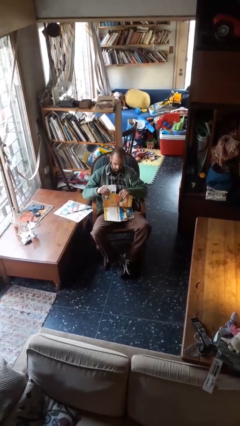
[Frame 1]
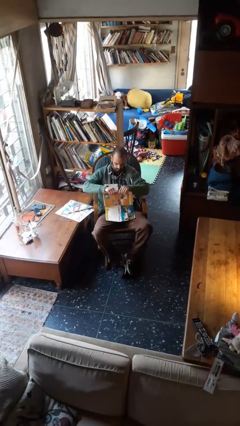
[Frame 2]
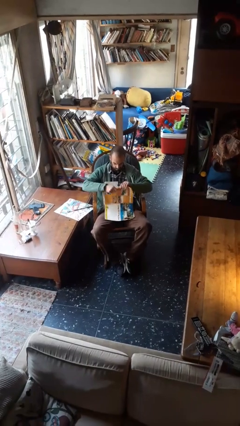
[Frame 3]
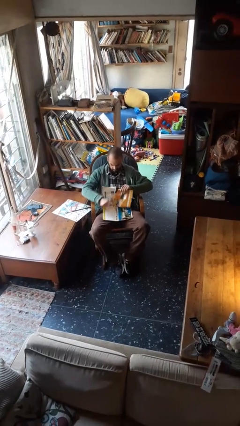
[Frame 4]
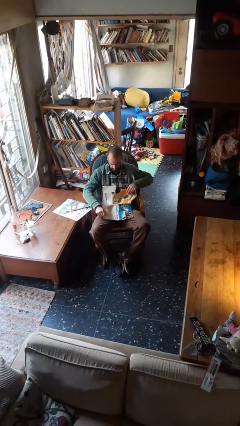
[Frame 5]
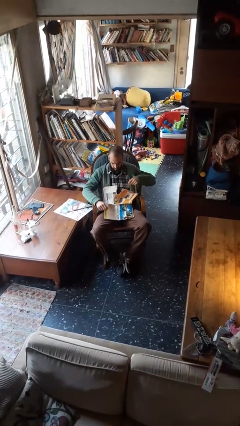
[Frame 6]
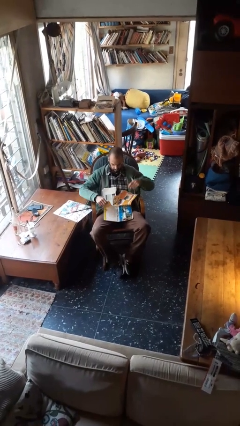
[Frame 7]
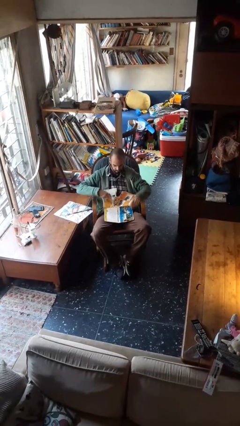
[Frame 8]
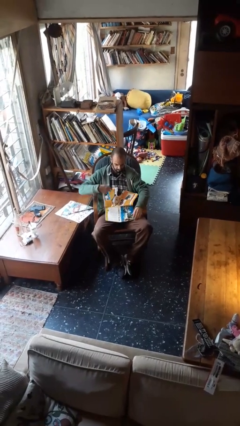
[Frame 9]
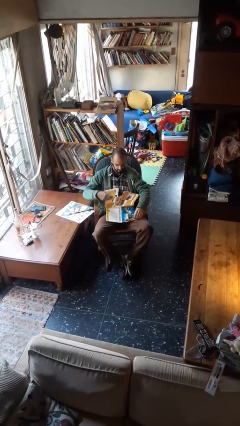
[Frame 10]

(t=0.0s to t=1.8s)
person tears paper

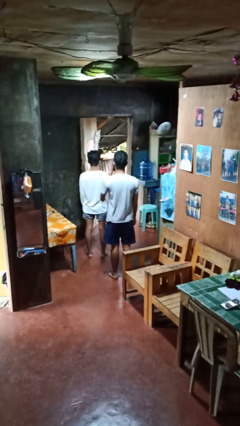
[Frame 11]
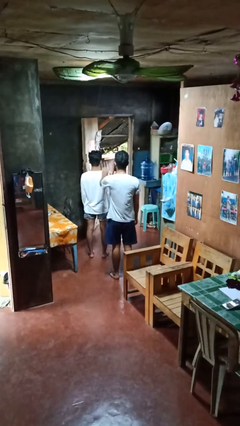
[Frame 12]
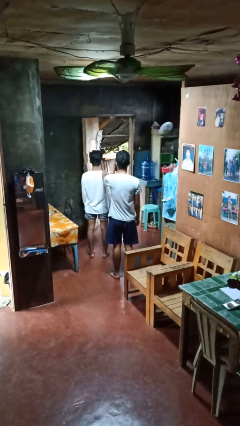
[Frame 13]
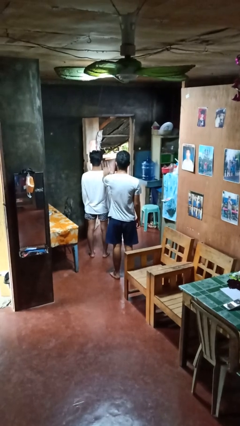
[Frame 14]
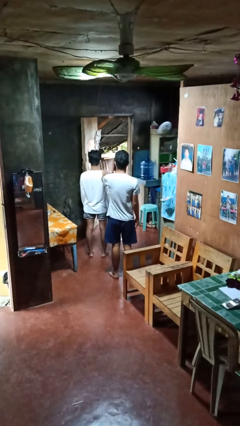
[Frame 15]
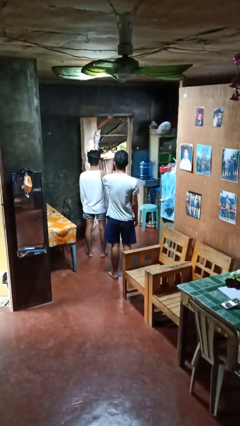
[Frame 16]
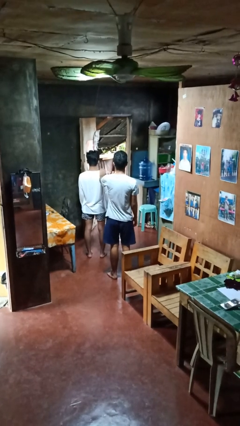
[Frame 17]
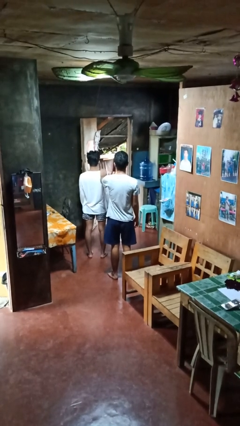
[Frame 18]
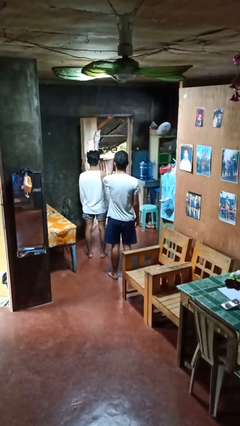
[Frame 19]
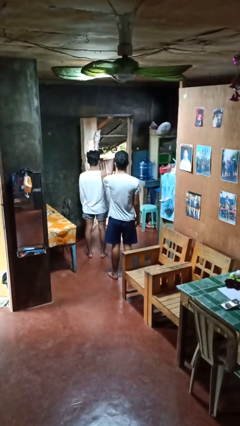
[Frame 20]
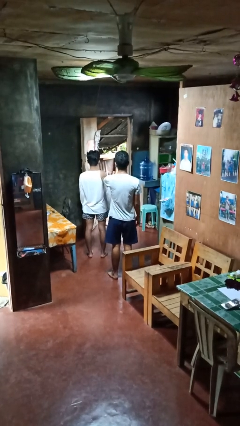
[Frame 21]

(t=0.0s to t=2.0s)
person pounds shoulders of person

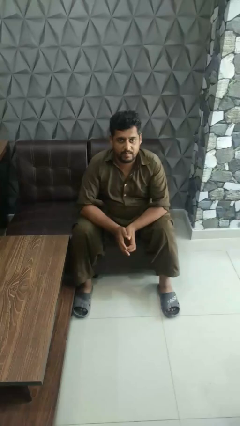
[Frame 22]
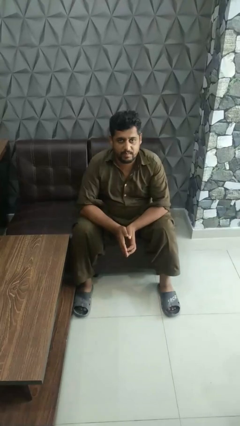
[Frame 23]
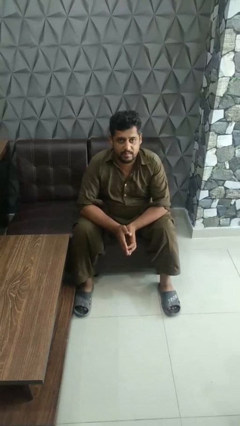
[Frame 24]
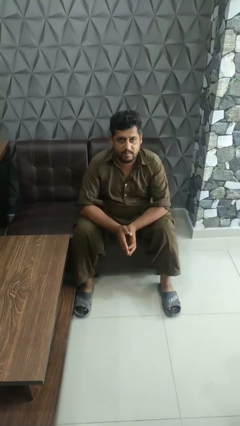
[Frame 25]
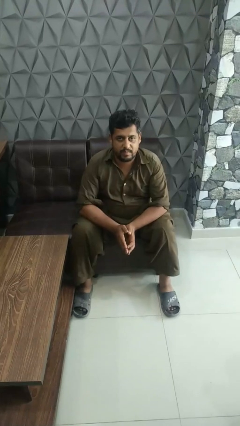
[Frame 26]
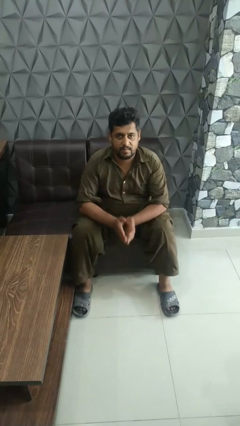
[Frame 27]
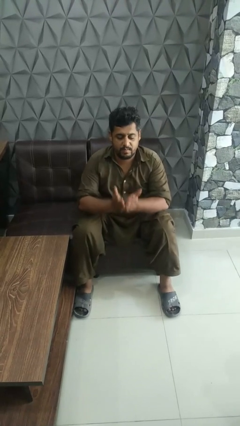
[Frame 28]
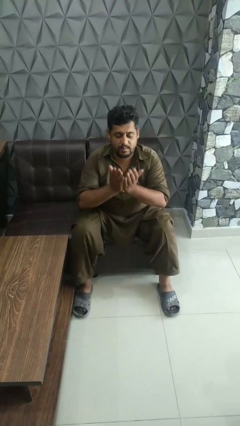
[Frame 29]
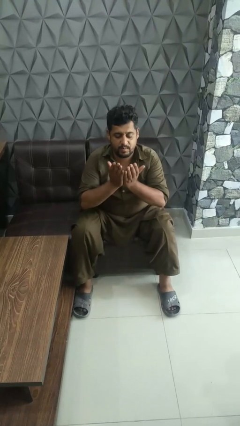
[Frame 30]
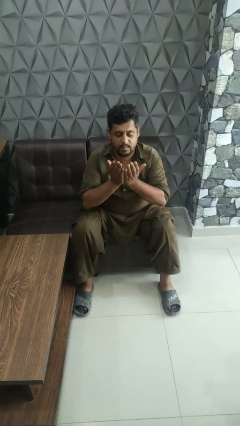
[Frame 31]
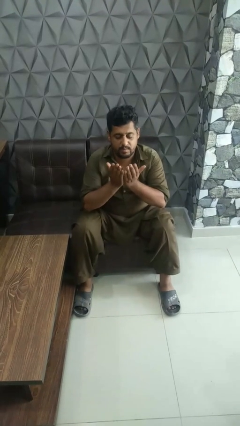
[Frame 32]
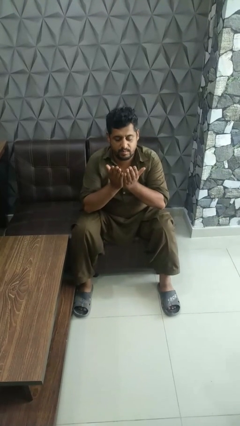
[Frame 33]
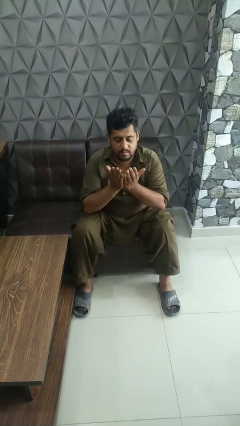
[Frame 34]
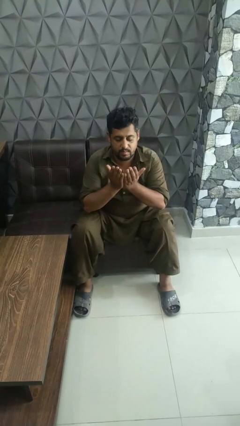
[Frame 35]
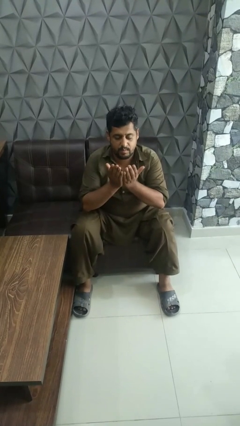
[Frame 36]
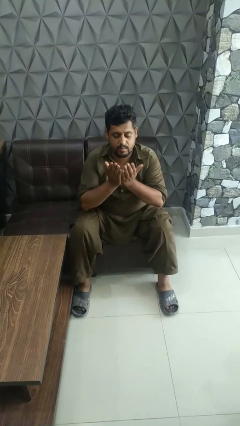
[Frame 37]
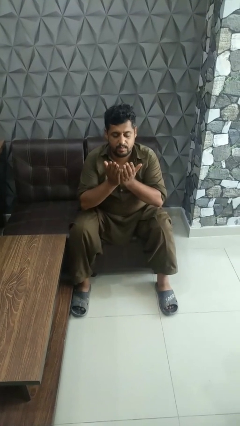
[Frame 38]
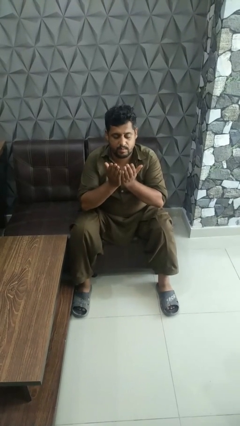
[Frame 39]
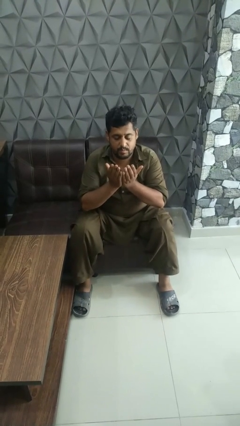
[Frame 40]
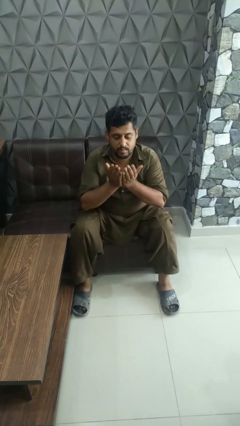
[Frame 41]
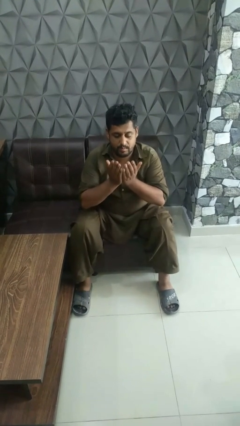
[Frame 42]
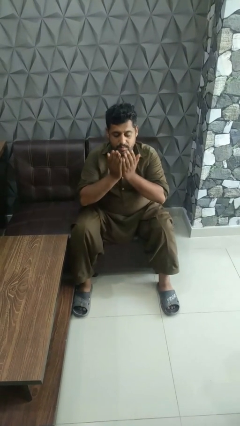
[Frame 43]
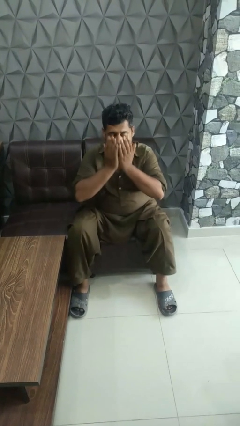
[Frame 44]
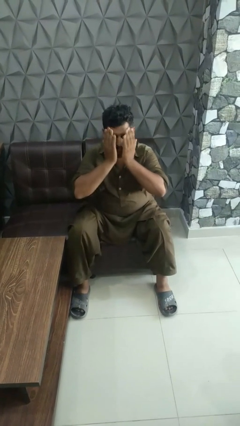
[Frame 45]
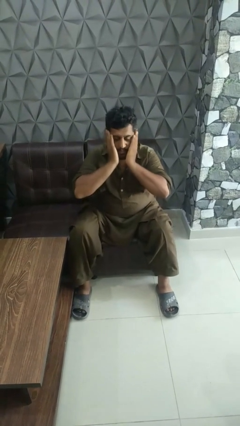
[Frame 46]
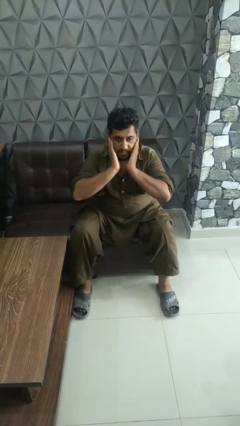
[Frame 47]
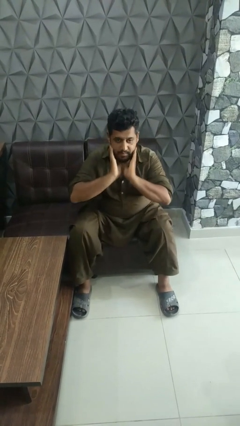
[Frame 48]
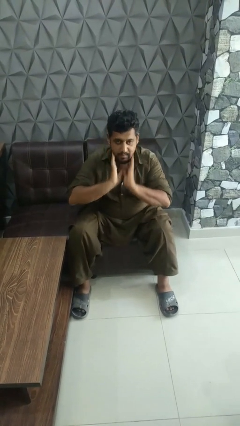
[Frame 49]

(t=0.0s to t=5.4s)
person prays

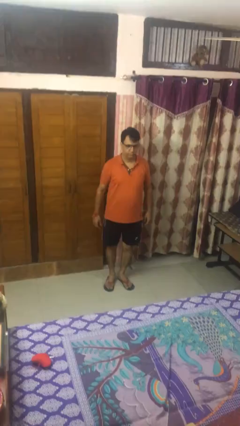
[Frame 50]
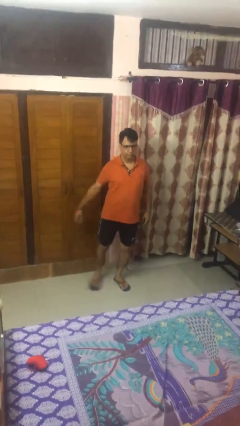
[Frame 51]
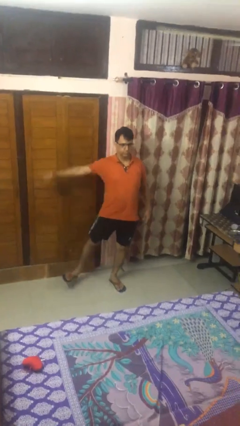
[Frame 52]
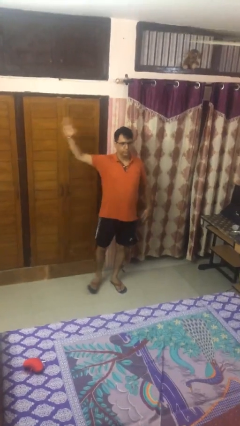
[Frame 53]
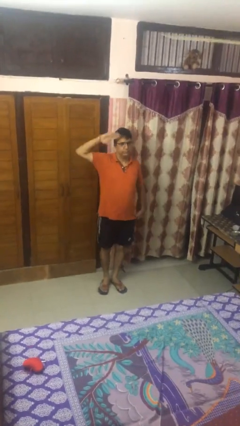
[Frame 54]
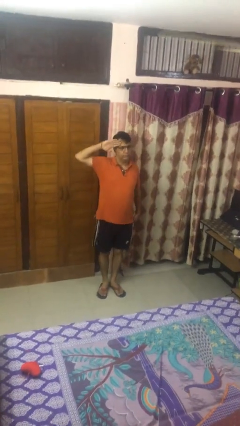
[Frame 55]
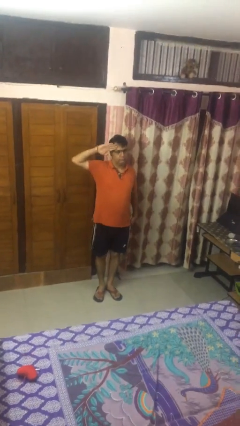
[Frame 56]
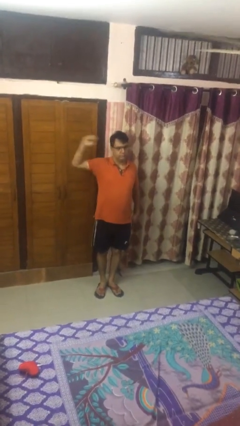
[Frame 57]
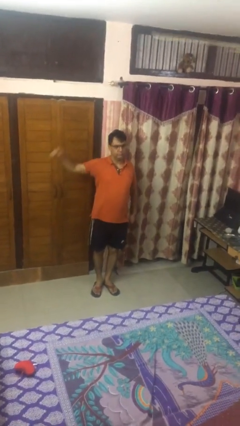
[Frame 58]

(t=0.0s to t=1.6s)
person salutes

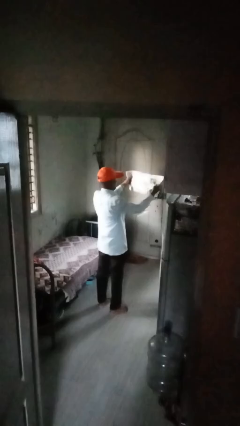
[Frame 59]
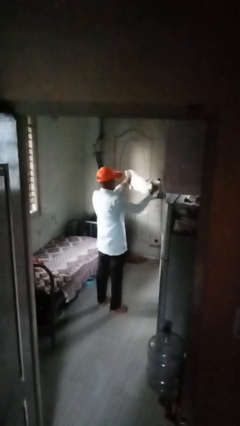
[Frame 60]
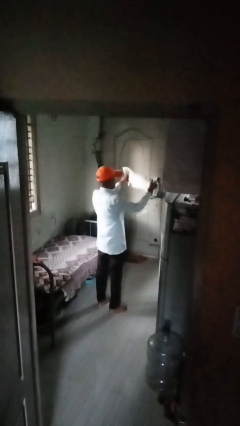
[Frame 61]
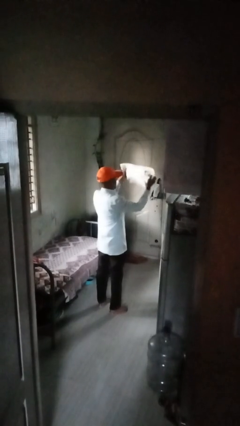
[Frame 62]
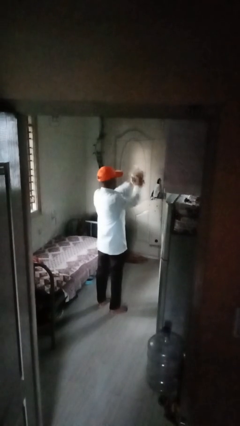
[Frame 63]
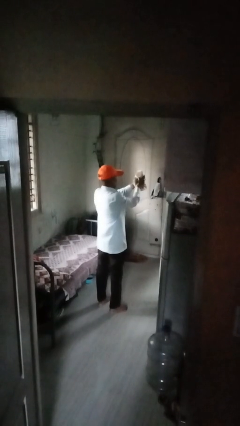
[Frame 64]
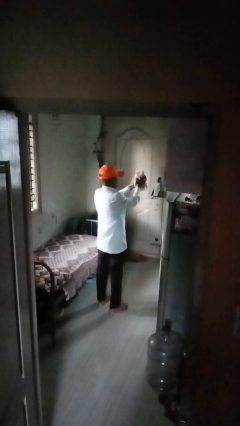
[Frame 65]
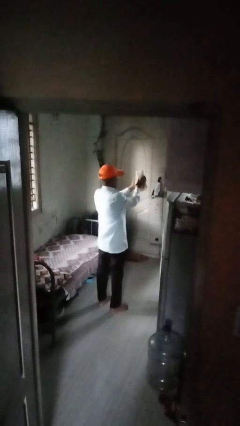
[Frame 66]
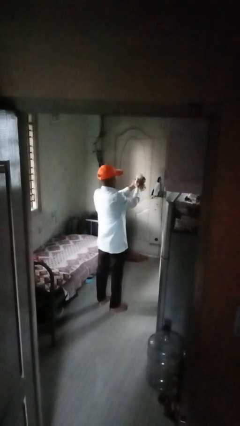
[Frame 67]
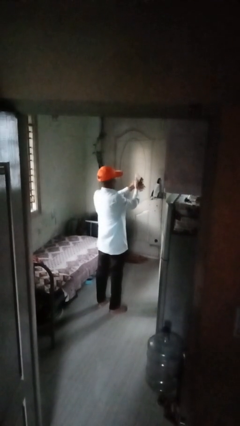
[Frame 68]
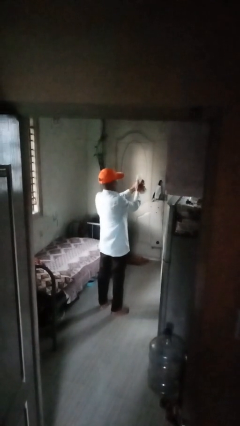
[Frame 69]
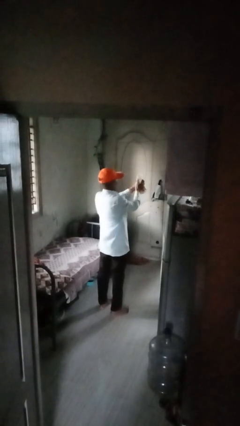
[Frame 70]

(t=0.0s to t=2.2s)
person crumples paper

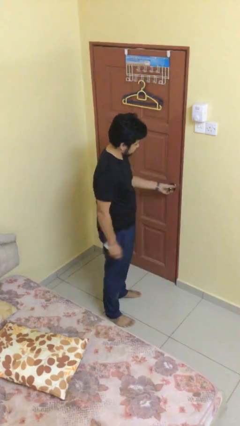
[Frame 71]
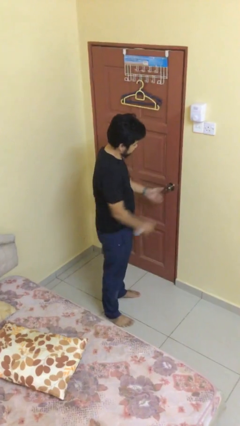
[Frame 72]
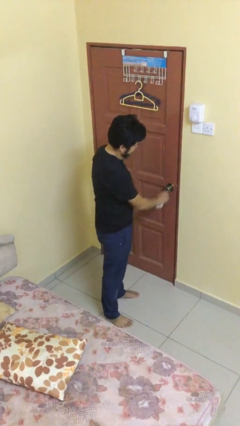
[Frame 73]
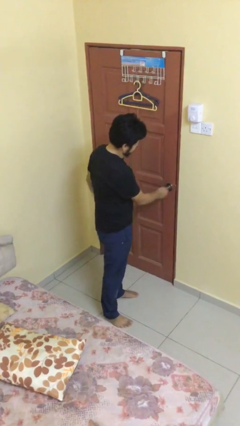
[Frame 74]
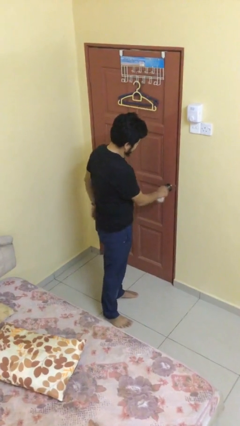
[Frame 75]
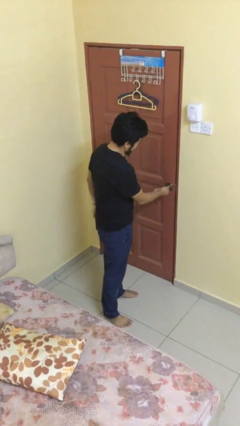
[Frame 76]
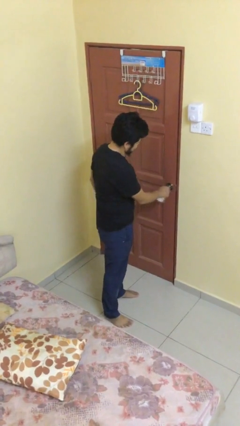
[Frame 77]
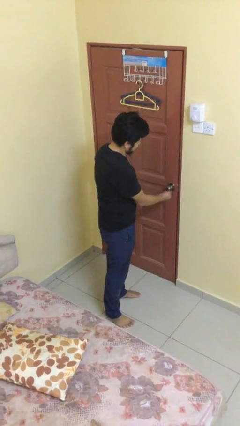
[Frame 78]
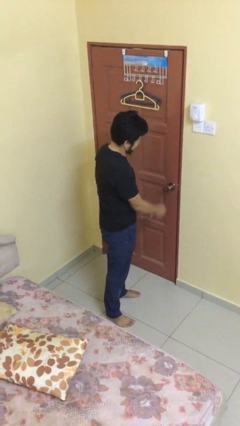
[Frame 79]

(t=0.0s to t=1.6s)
person locks door with keys

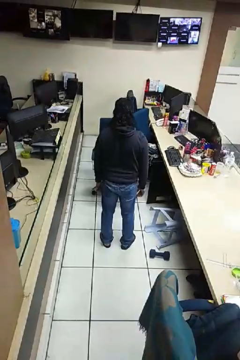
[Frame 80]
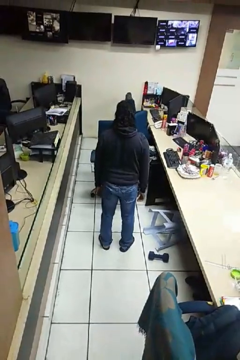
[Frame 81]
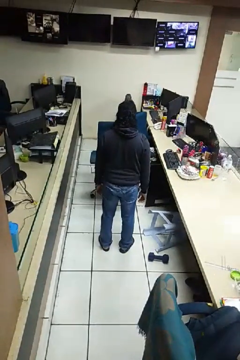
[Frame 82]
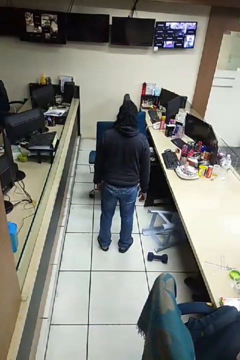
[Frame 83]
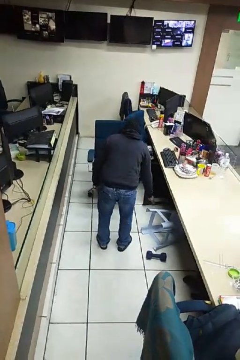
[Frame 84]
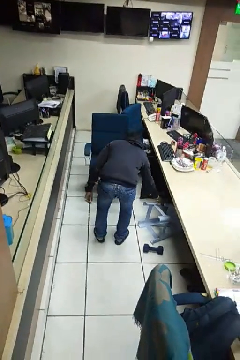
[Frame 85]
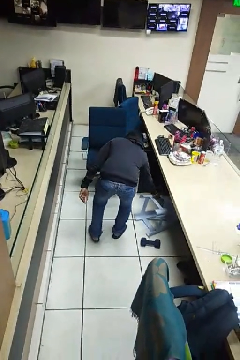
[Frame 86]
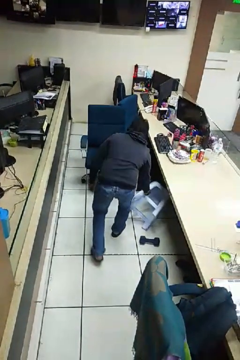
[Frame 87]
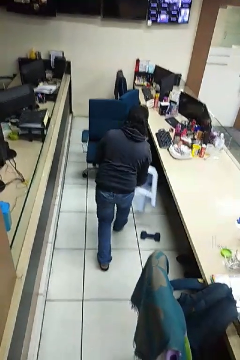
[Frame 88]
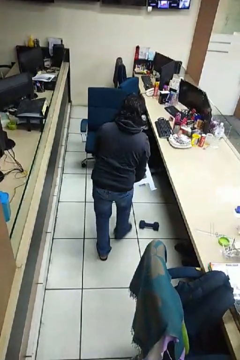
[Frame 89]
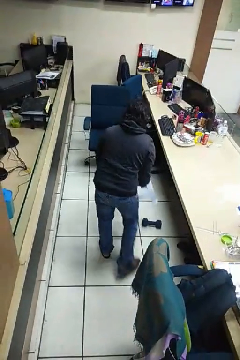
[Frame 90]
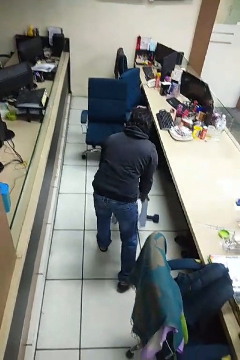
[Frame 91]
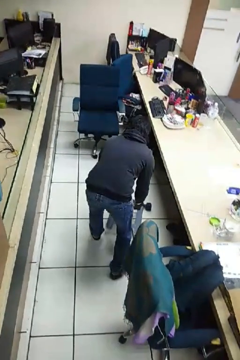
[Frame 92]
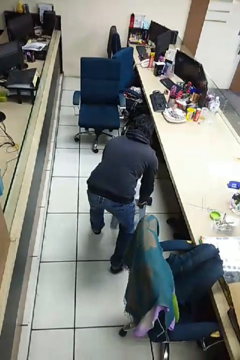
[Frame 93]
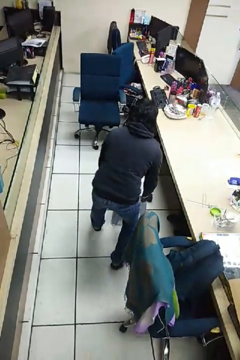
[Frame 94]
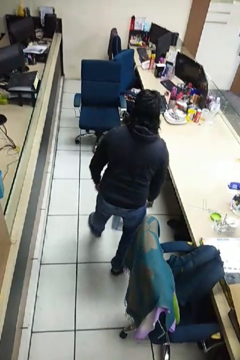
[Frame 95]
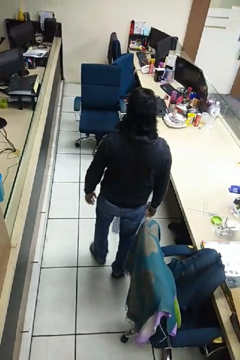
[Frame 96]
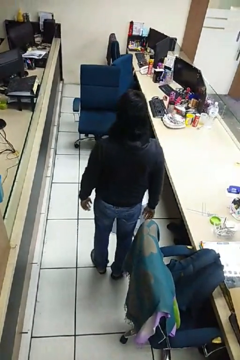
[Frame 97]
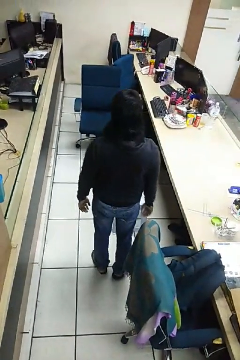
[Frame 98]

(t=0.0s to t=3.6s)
person sets upright furniture
